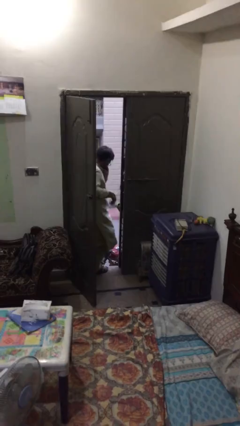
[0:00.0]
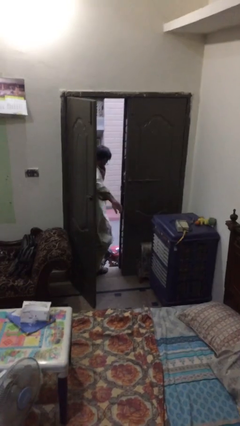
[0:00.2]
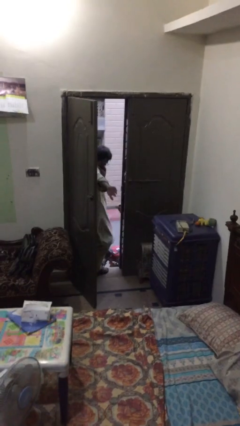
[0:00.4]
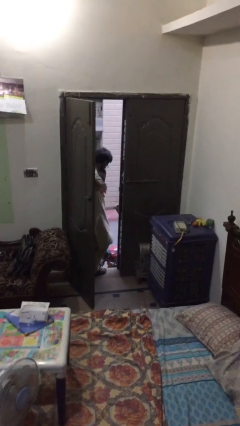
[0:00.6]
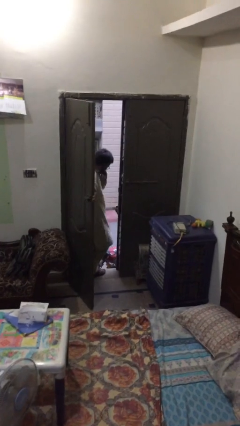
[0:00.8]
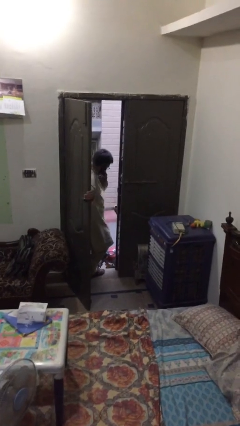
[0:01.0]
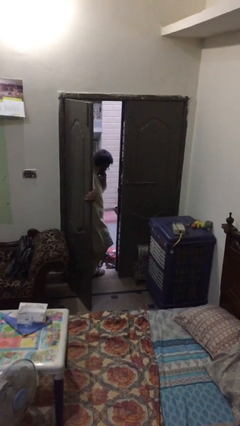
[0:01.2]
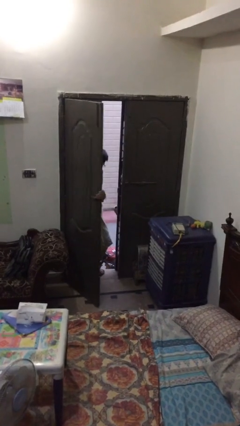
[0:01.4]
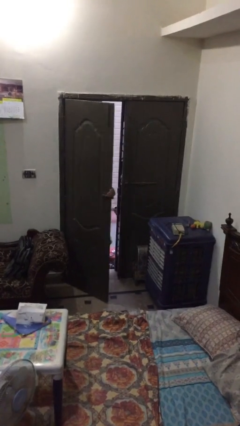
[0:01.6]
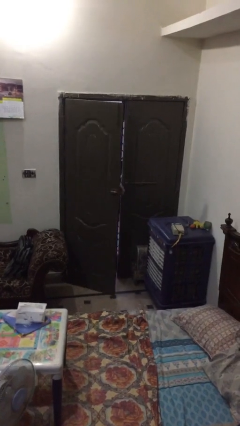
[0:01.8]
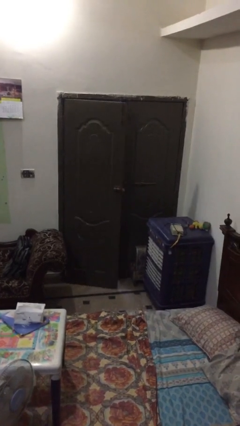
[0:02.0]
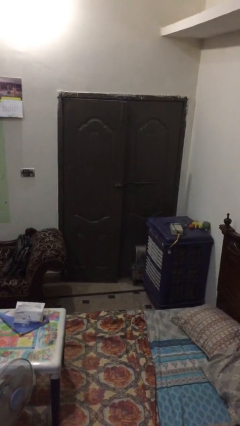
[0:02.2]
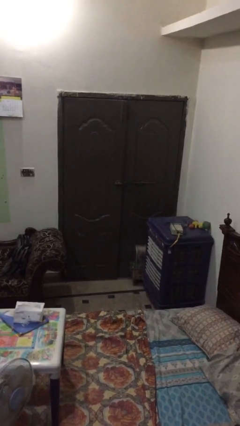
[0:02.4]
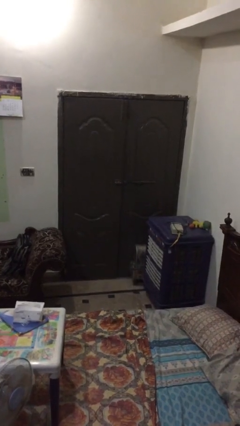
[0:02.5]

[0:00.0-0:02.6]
person closes facility door

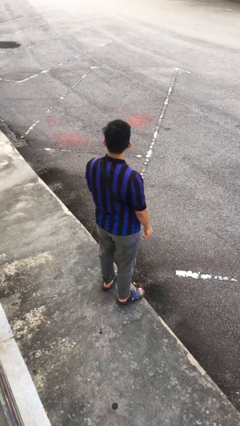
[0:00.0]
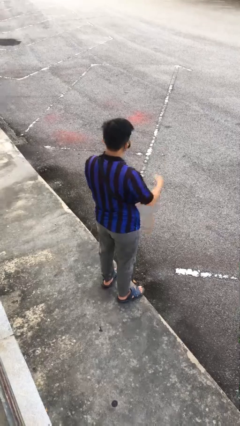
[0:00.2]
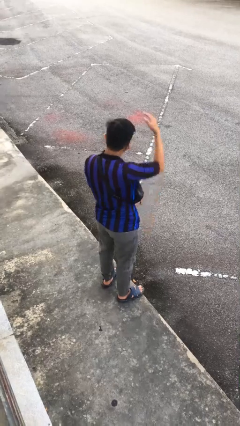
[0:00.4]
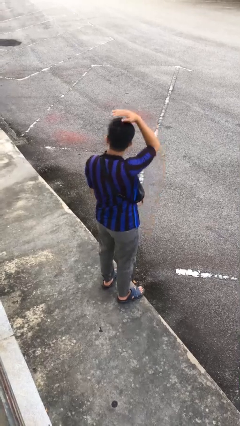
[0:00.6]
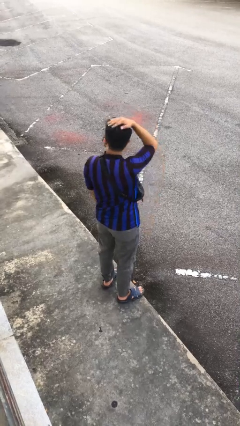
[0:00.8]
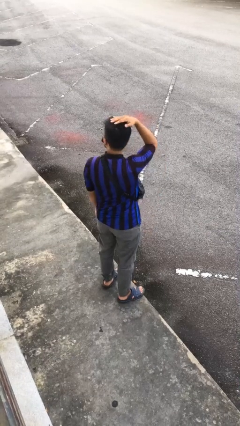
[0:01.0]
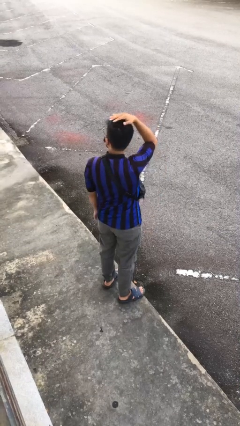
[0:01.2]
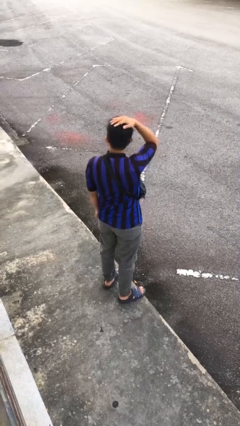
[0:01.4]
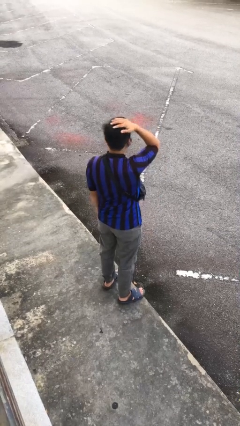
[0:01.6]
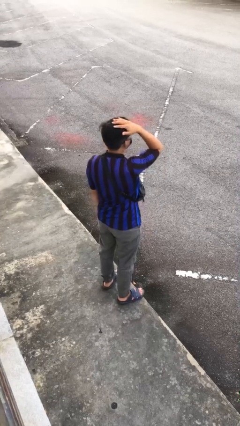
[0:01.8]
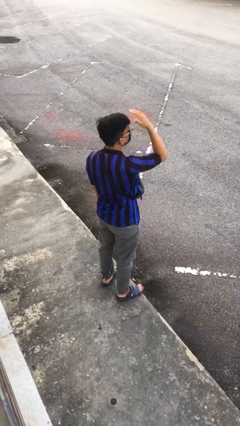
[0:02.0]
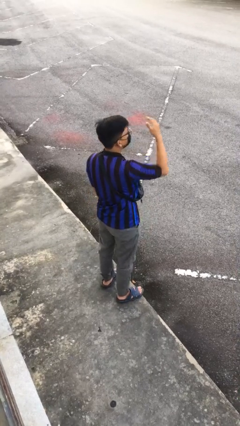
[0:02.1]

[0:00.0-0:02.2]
person pats head

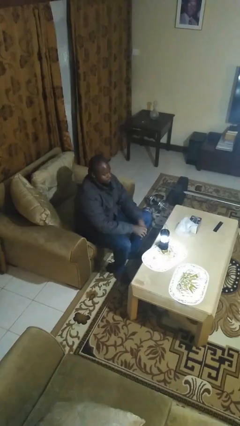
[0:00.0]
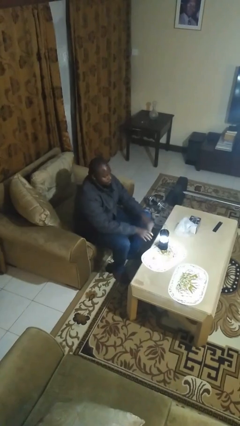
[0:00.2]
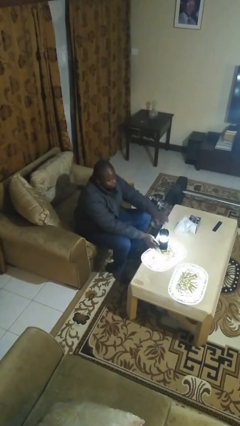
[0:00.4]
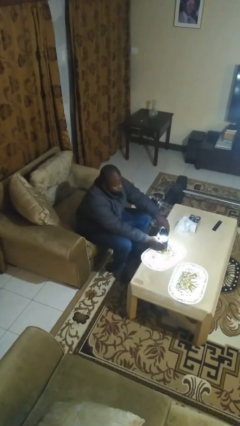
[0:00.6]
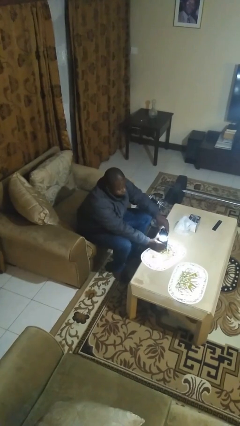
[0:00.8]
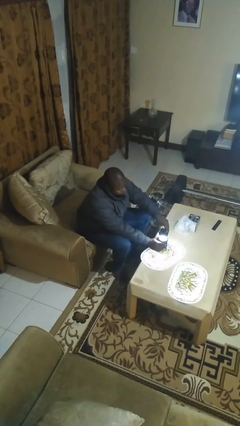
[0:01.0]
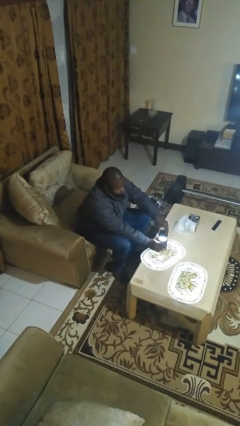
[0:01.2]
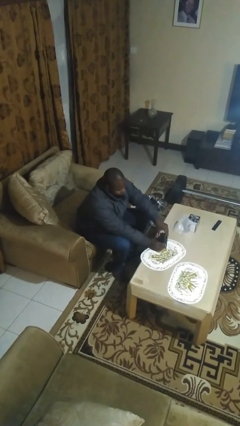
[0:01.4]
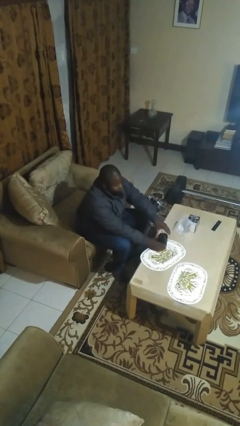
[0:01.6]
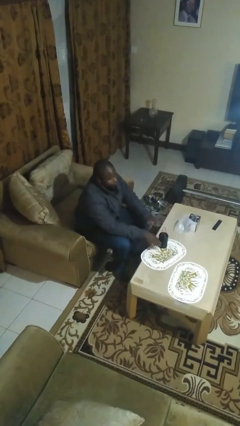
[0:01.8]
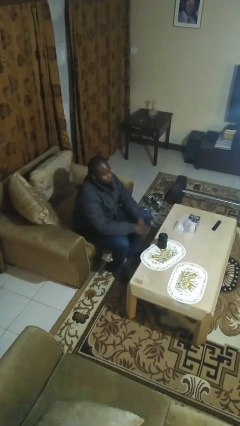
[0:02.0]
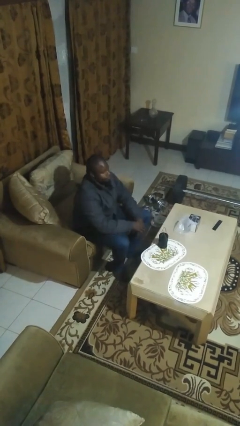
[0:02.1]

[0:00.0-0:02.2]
person turns off lamp

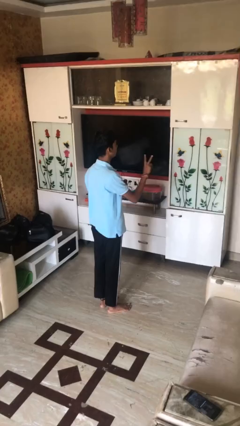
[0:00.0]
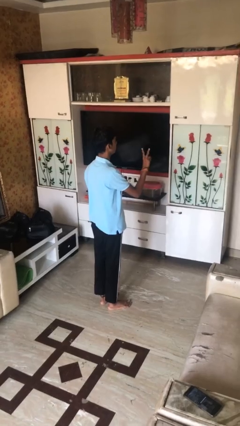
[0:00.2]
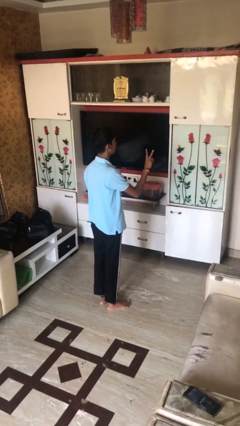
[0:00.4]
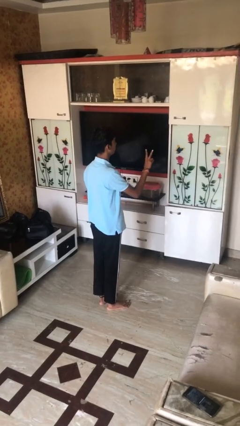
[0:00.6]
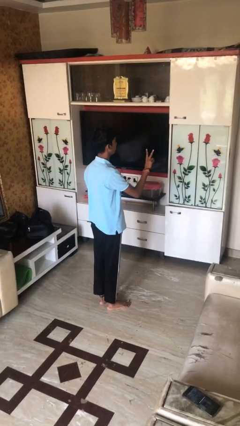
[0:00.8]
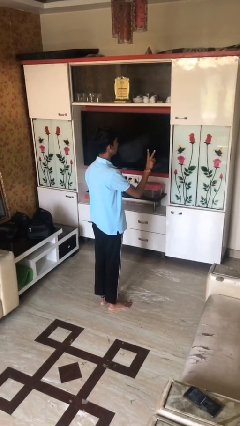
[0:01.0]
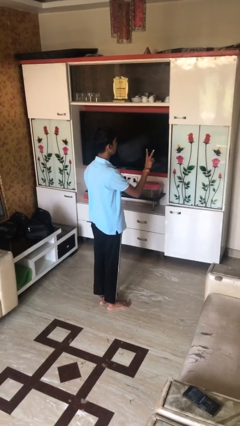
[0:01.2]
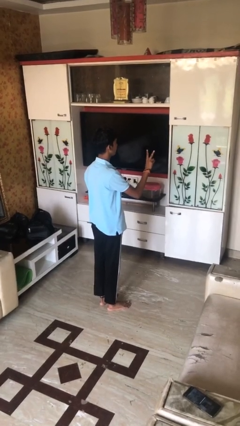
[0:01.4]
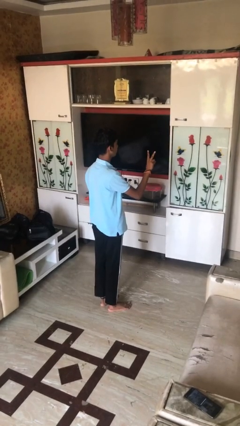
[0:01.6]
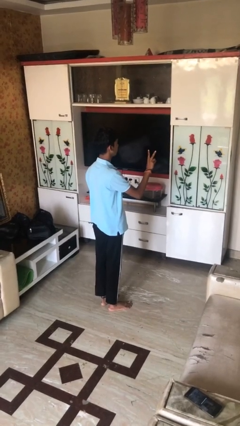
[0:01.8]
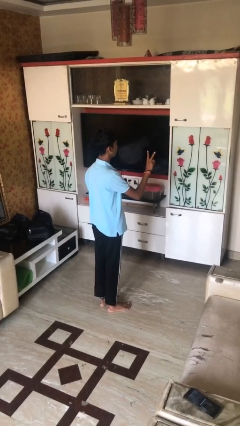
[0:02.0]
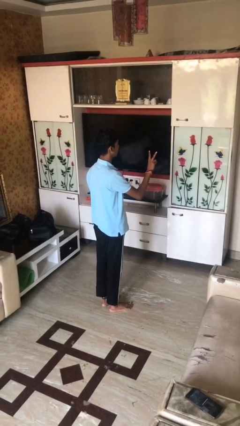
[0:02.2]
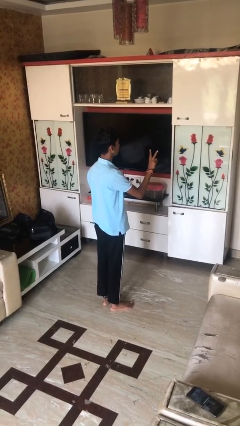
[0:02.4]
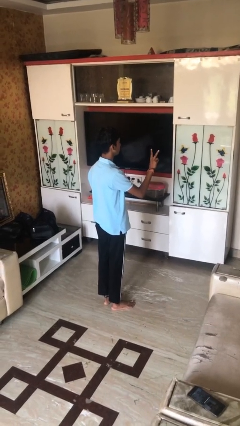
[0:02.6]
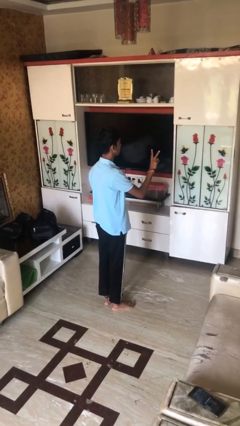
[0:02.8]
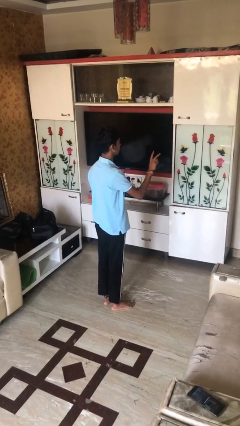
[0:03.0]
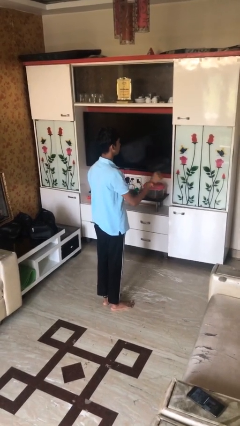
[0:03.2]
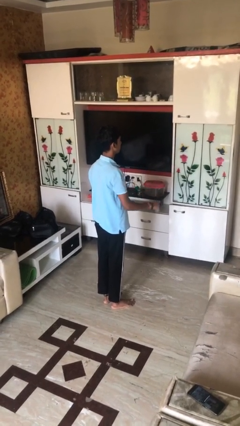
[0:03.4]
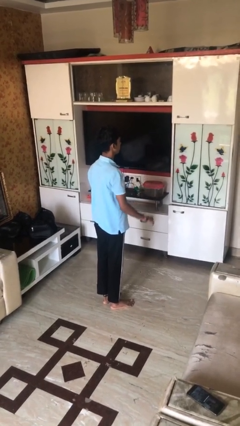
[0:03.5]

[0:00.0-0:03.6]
person gestures peace

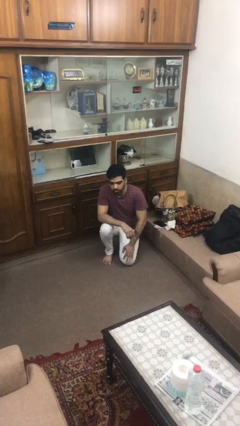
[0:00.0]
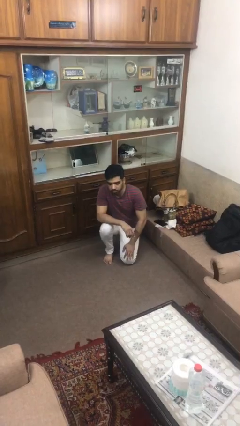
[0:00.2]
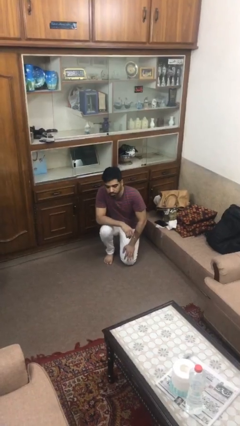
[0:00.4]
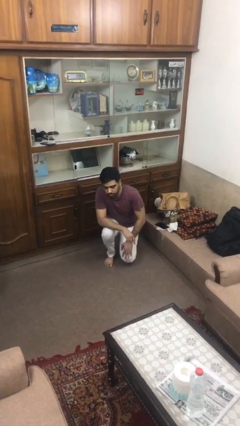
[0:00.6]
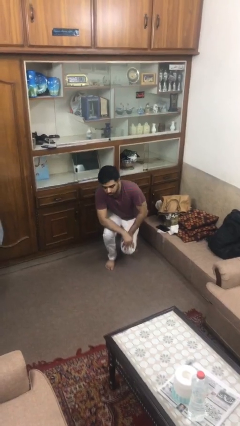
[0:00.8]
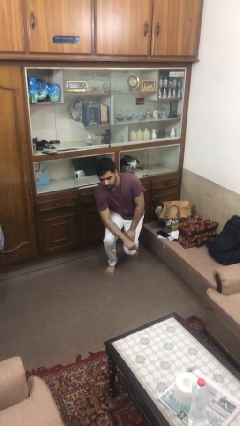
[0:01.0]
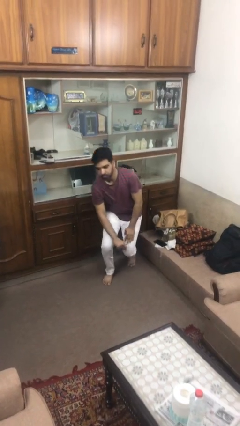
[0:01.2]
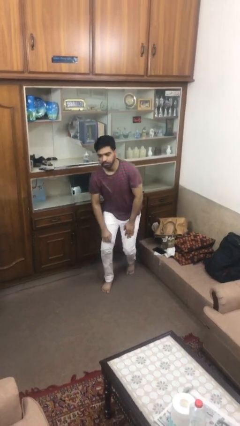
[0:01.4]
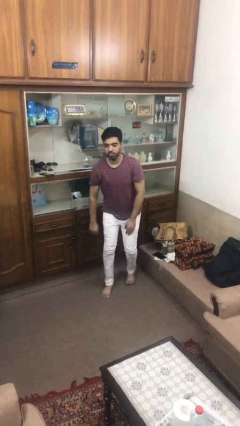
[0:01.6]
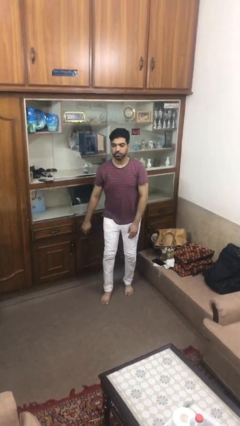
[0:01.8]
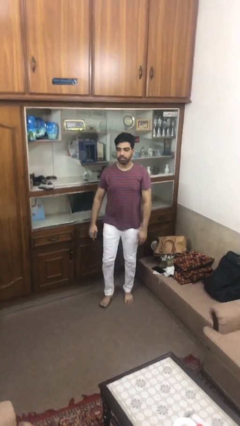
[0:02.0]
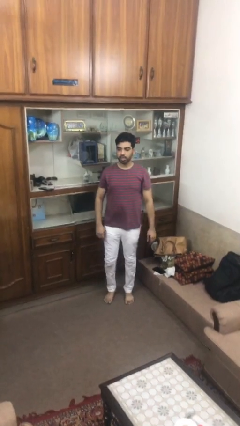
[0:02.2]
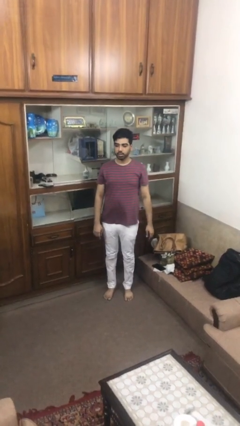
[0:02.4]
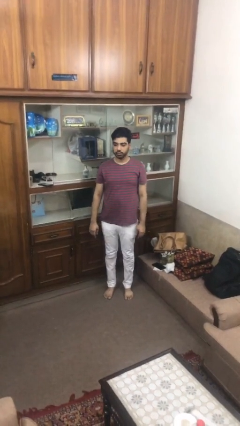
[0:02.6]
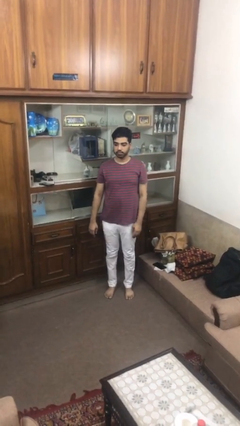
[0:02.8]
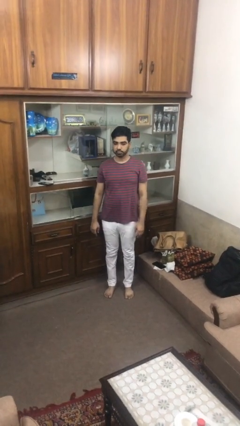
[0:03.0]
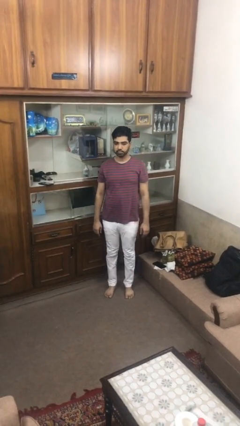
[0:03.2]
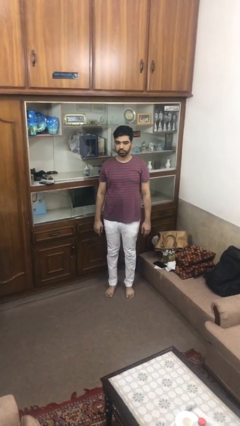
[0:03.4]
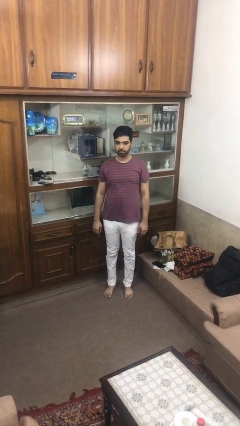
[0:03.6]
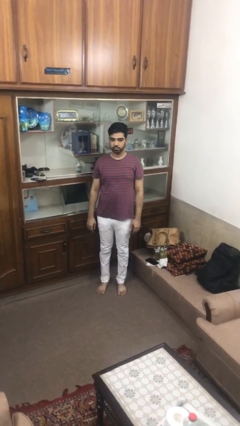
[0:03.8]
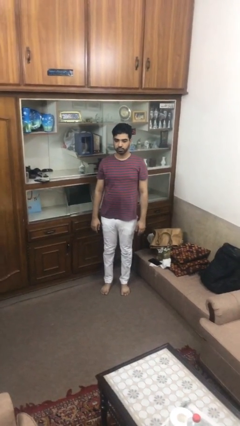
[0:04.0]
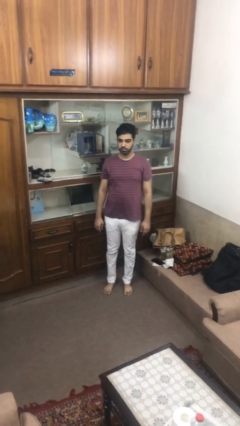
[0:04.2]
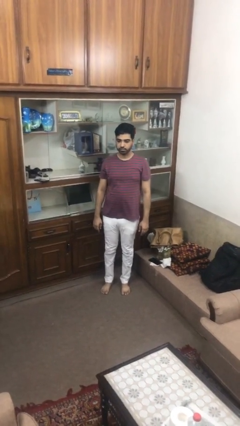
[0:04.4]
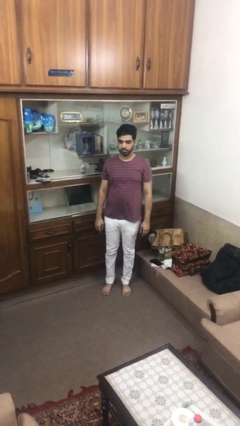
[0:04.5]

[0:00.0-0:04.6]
person stands up from floor

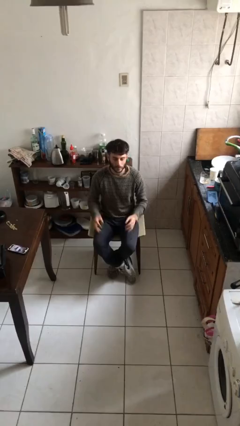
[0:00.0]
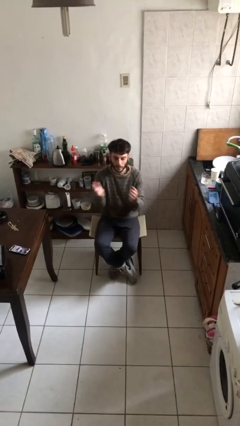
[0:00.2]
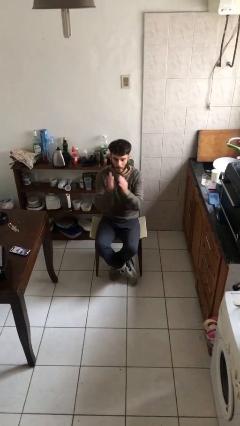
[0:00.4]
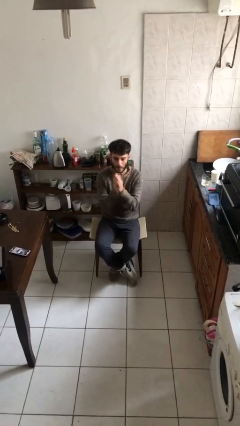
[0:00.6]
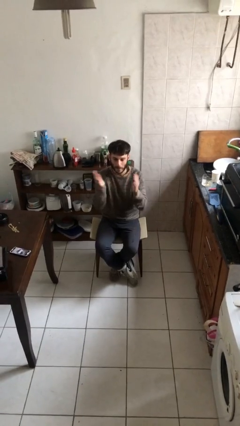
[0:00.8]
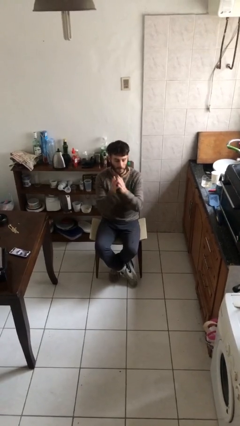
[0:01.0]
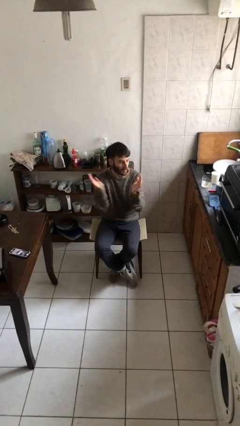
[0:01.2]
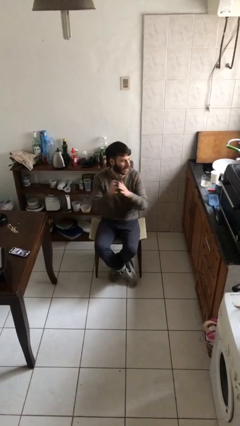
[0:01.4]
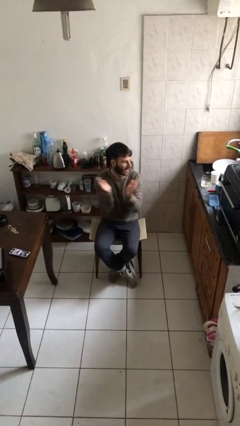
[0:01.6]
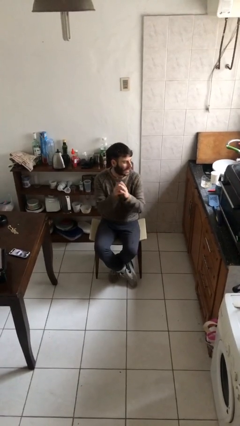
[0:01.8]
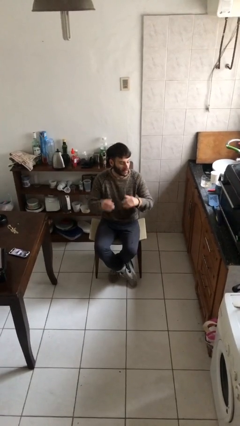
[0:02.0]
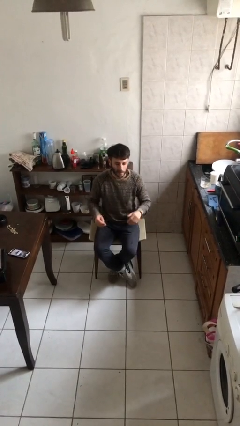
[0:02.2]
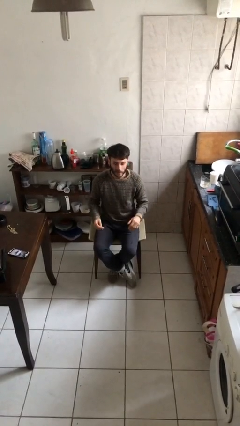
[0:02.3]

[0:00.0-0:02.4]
person claps hands
